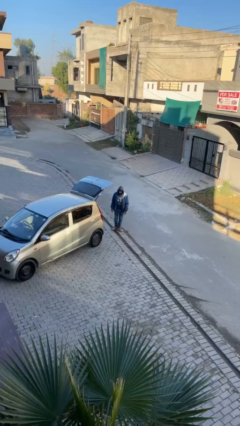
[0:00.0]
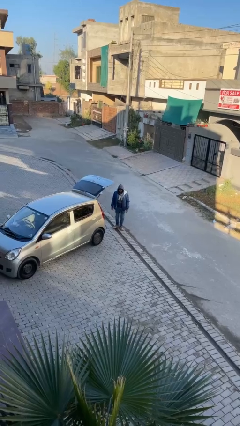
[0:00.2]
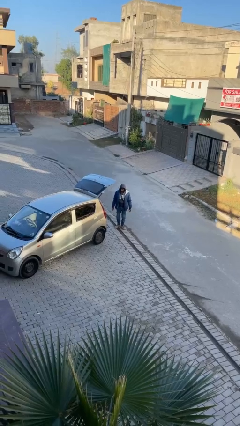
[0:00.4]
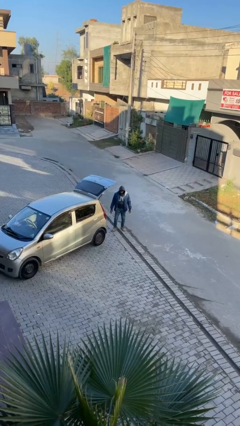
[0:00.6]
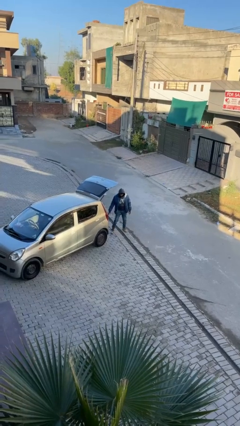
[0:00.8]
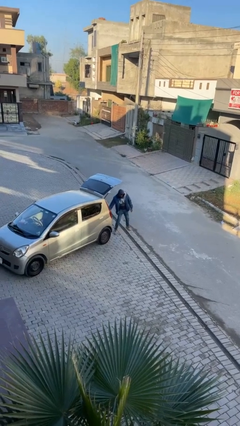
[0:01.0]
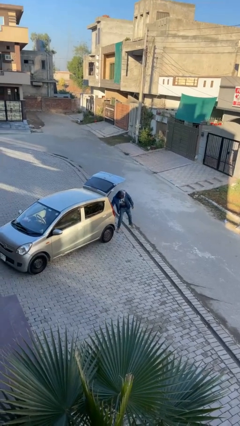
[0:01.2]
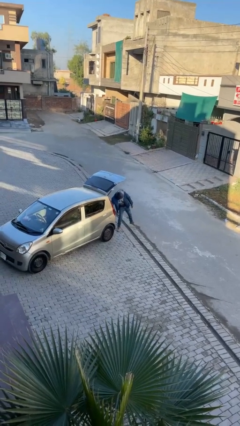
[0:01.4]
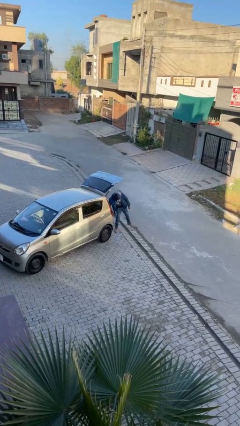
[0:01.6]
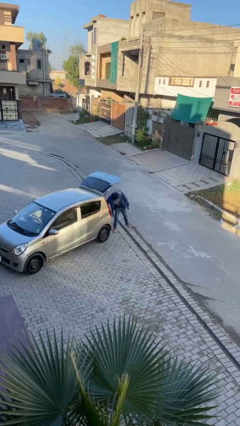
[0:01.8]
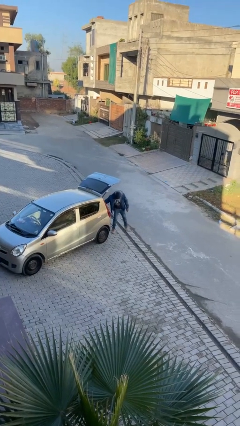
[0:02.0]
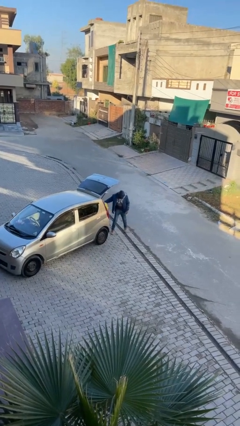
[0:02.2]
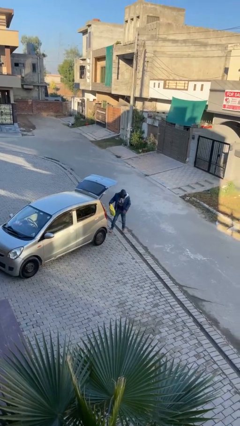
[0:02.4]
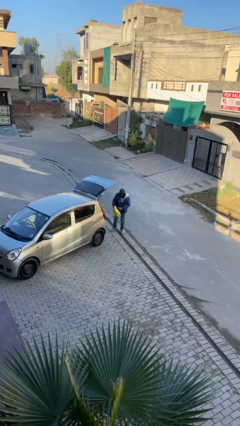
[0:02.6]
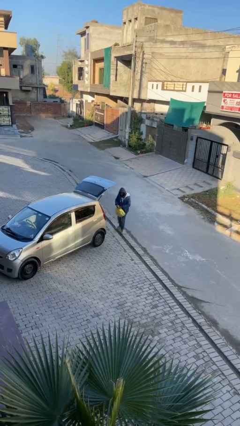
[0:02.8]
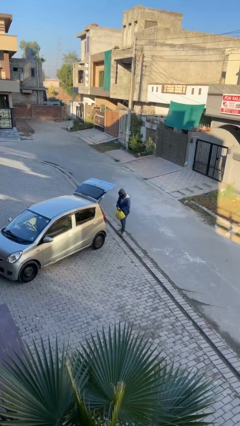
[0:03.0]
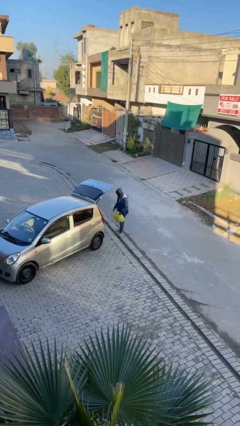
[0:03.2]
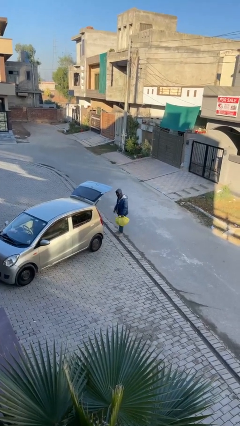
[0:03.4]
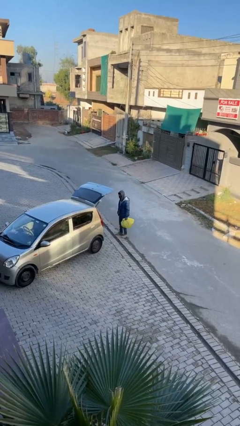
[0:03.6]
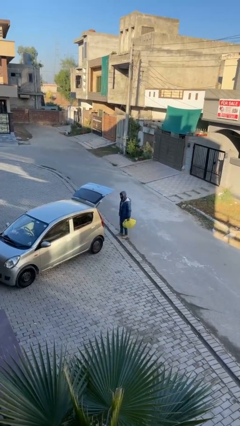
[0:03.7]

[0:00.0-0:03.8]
person unloads car

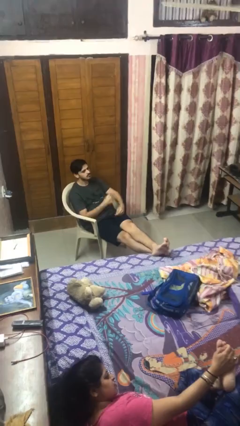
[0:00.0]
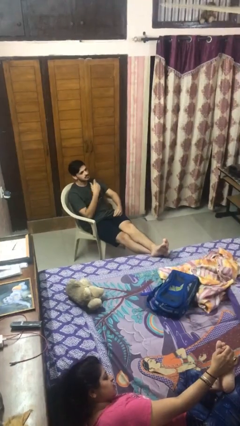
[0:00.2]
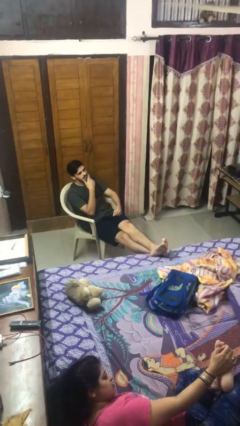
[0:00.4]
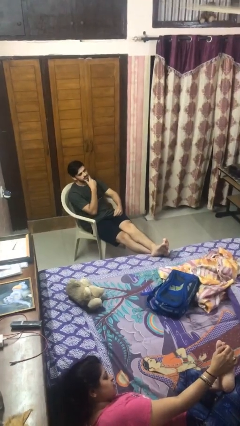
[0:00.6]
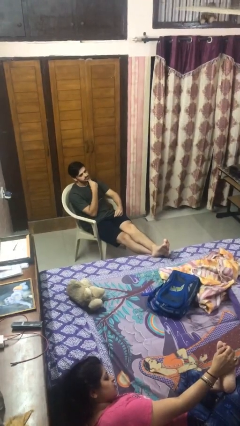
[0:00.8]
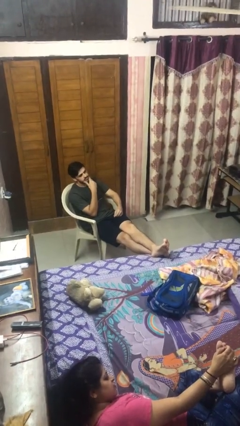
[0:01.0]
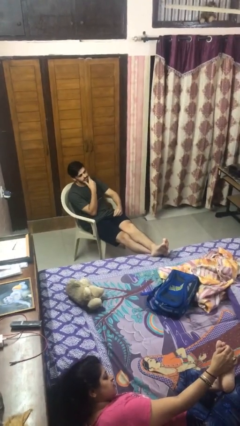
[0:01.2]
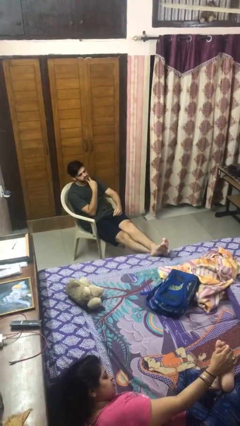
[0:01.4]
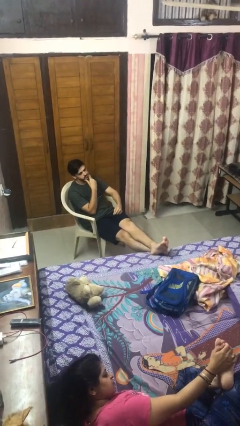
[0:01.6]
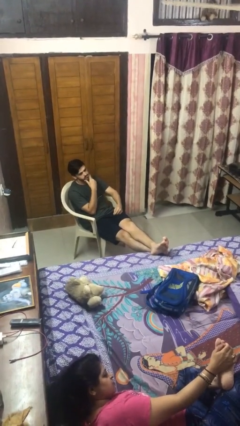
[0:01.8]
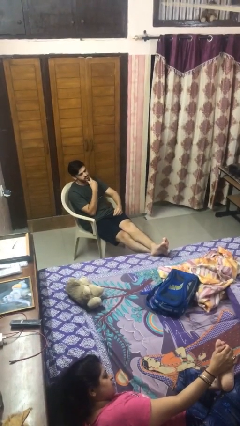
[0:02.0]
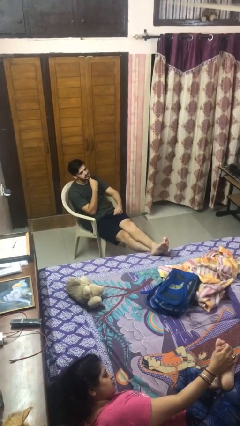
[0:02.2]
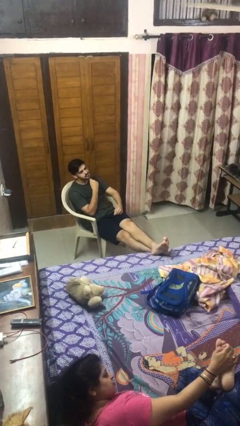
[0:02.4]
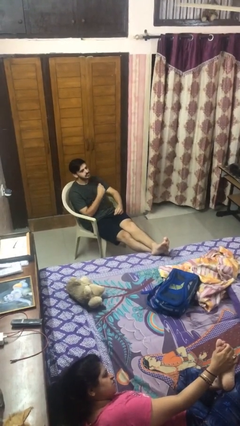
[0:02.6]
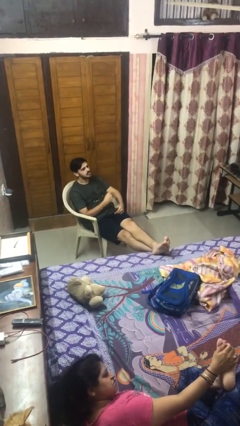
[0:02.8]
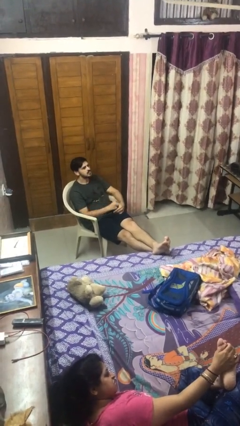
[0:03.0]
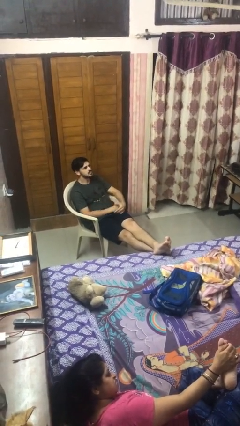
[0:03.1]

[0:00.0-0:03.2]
person strokes chin

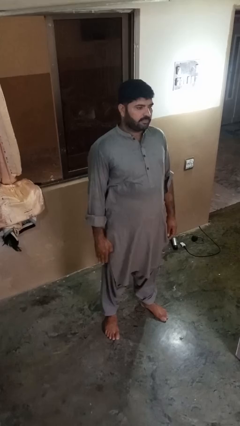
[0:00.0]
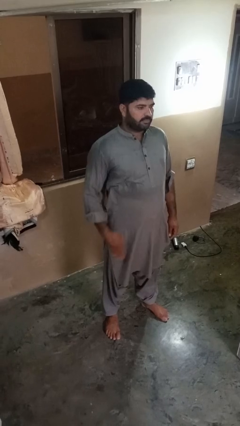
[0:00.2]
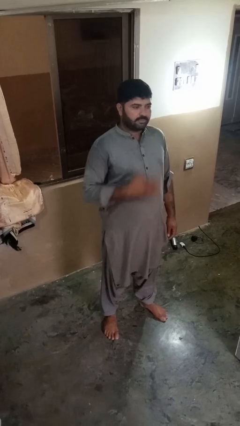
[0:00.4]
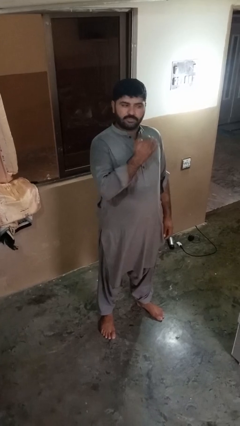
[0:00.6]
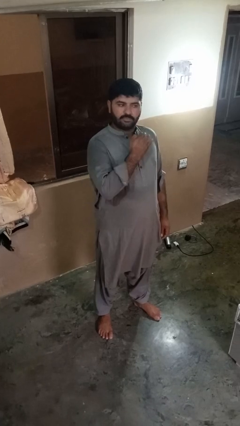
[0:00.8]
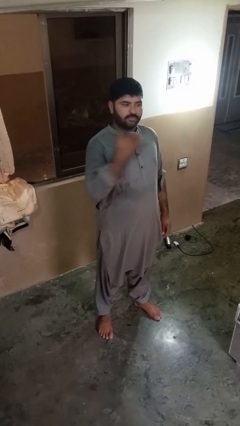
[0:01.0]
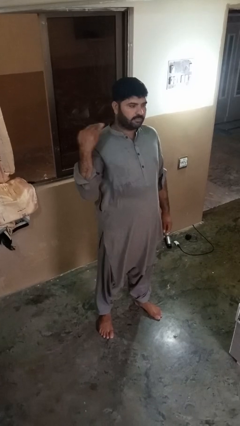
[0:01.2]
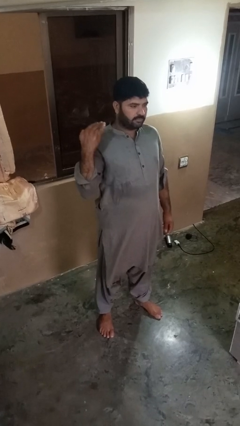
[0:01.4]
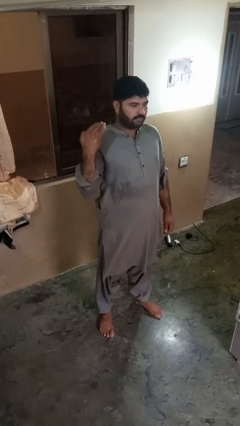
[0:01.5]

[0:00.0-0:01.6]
person gestures cut

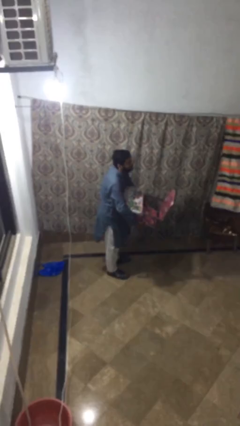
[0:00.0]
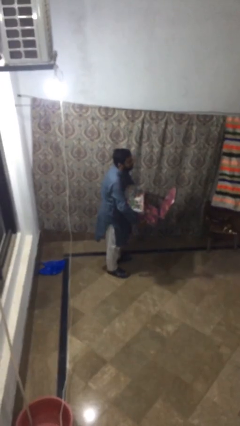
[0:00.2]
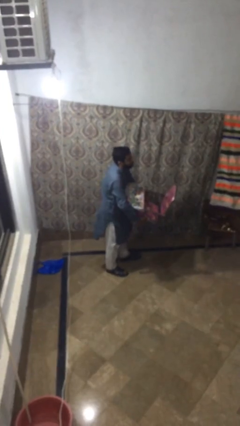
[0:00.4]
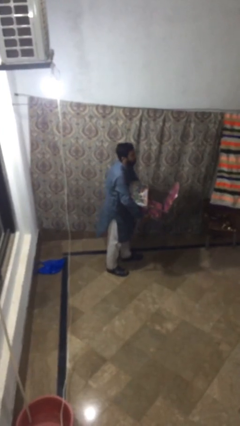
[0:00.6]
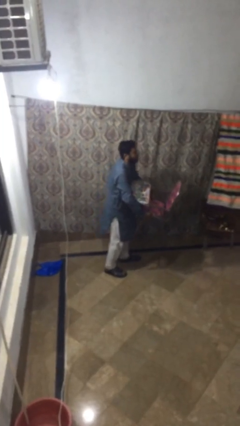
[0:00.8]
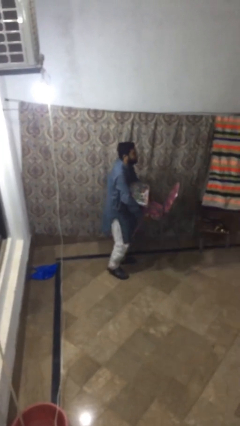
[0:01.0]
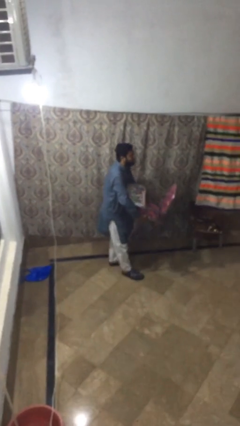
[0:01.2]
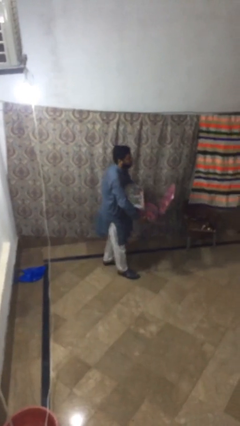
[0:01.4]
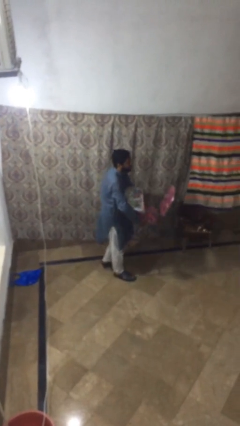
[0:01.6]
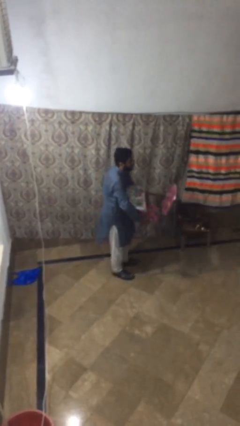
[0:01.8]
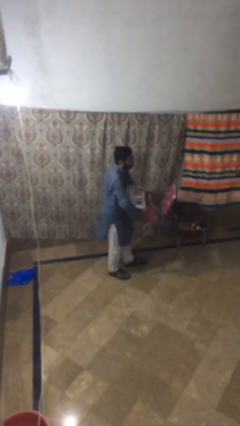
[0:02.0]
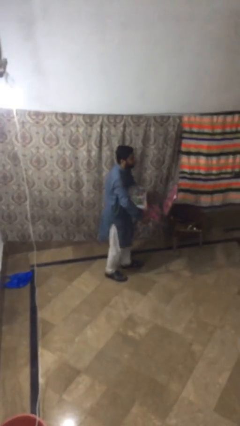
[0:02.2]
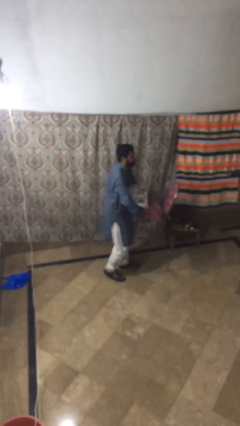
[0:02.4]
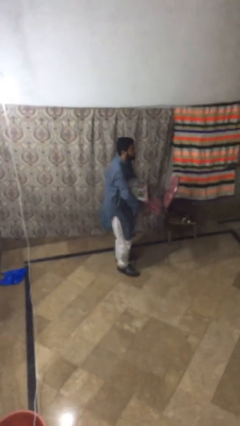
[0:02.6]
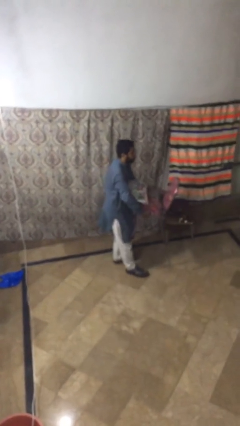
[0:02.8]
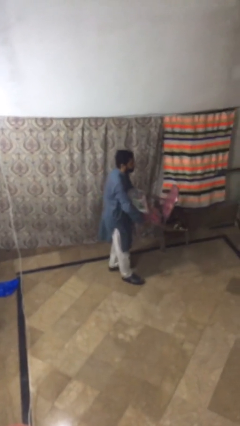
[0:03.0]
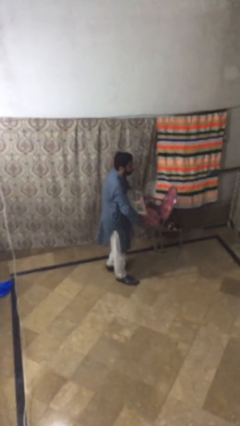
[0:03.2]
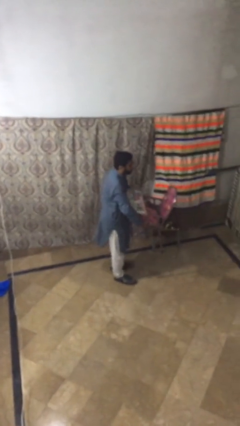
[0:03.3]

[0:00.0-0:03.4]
person carries heavy object

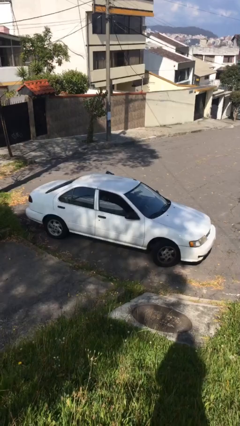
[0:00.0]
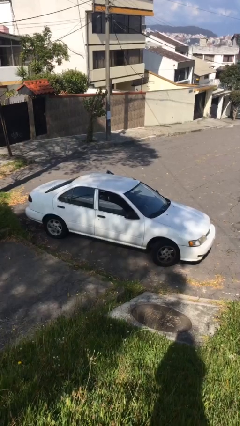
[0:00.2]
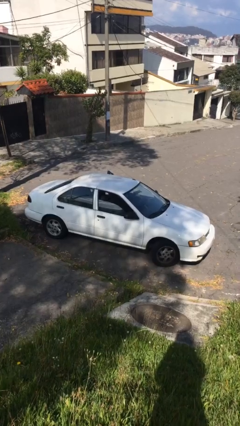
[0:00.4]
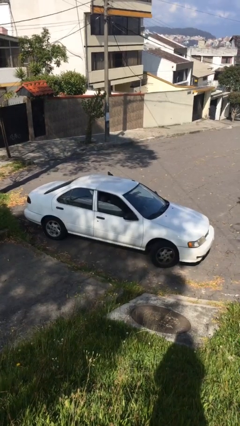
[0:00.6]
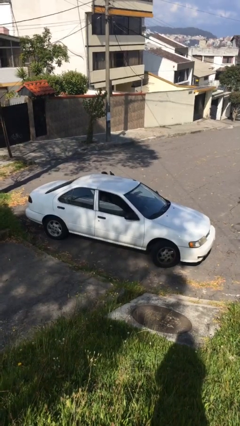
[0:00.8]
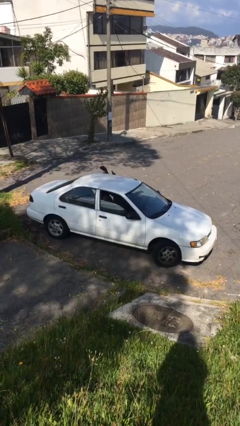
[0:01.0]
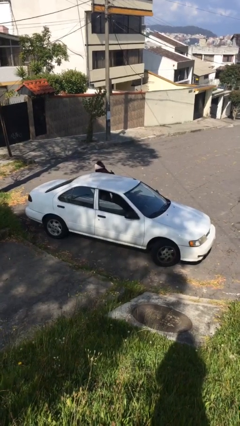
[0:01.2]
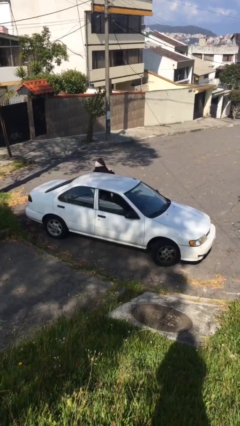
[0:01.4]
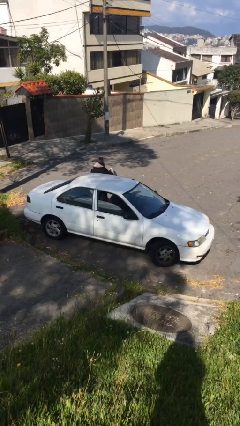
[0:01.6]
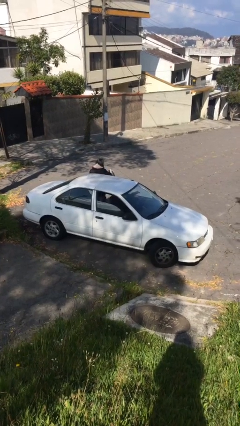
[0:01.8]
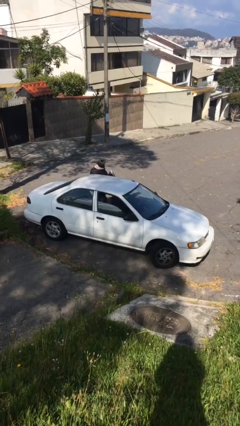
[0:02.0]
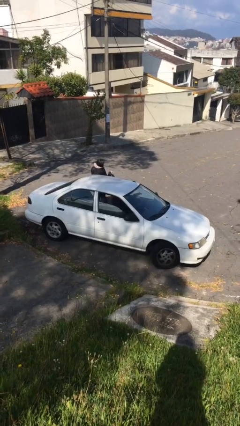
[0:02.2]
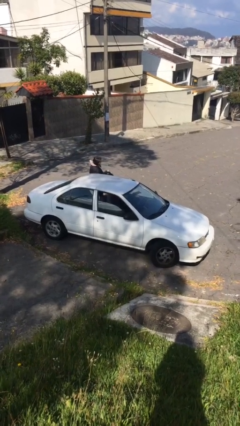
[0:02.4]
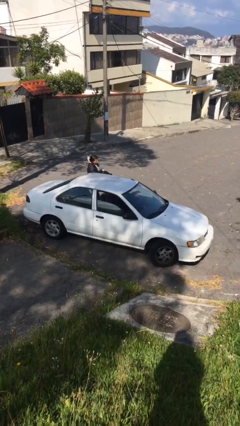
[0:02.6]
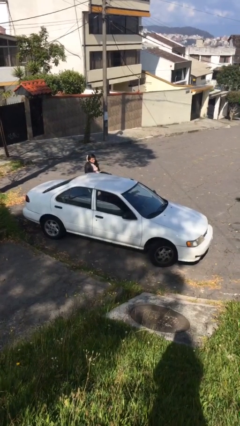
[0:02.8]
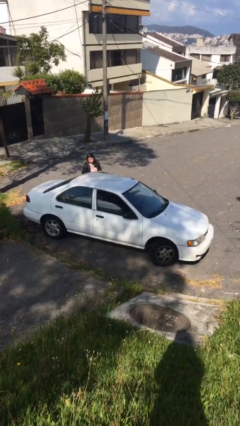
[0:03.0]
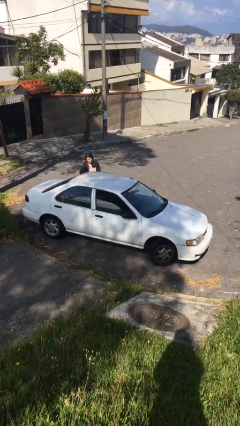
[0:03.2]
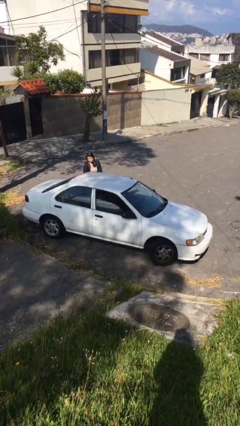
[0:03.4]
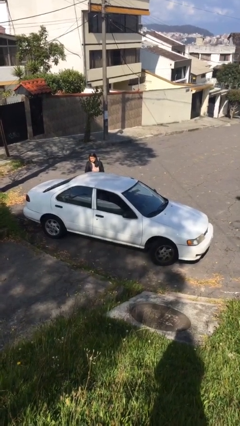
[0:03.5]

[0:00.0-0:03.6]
car drops off person

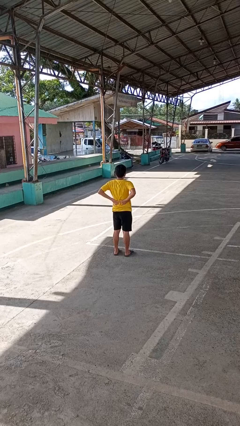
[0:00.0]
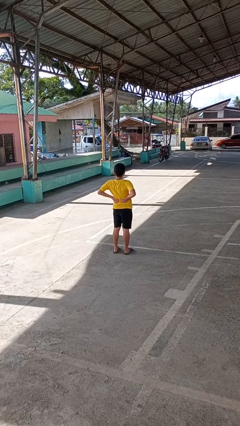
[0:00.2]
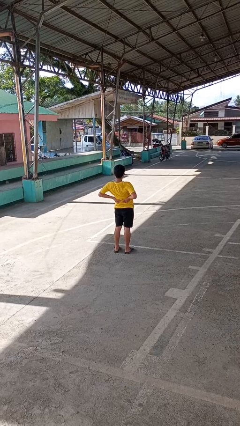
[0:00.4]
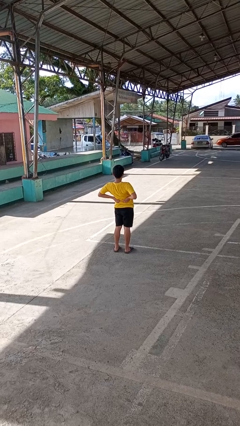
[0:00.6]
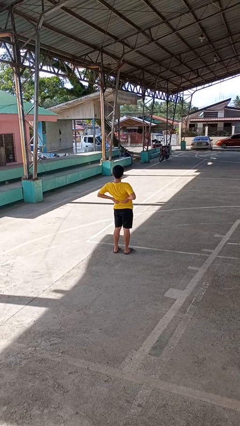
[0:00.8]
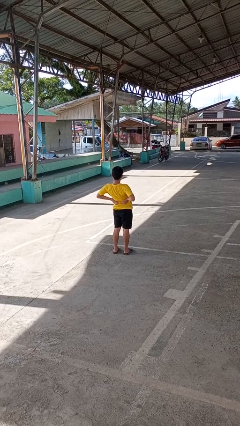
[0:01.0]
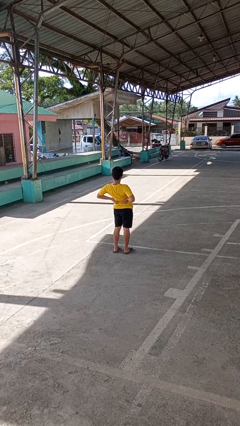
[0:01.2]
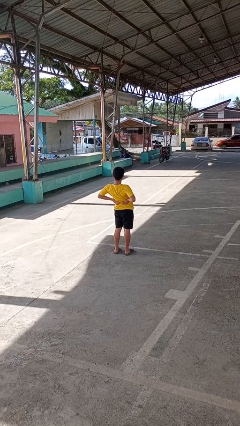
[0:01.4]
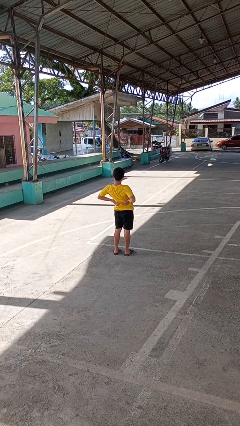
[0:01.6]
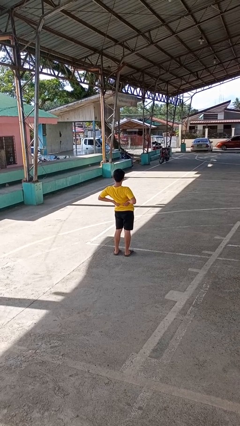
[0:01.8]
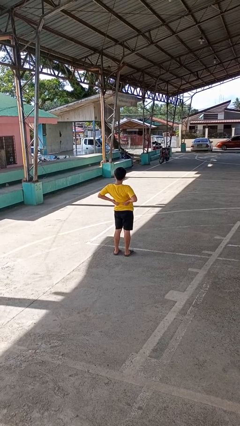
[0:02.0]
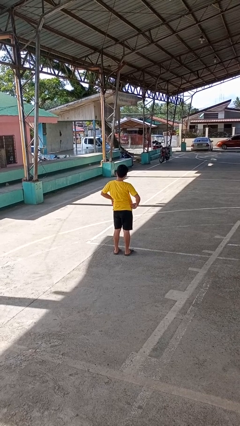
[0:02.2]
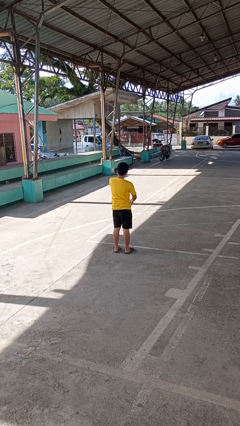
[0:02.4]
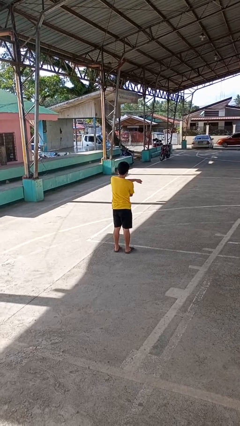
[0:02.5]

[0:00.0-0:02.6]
person stretches back
